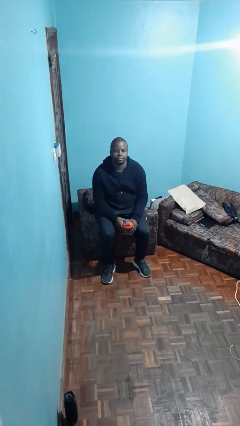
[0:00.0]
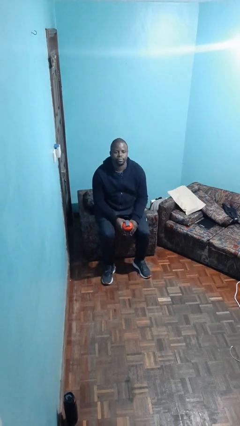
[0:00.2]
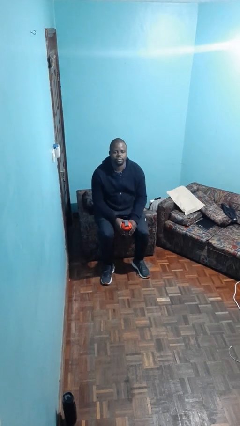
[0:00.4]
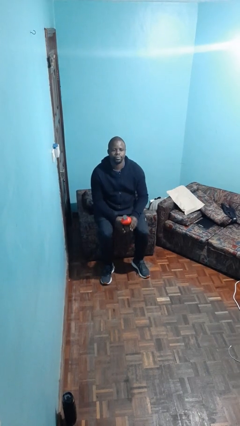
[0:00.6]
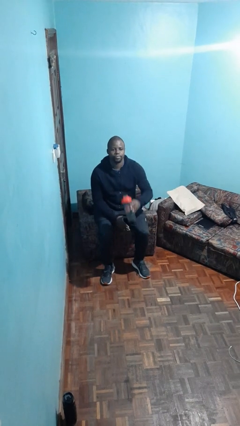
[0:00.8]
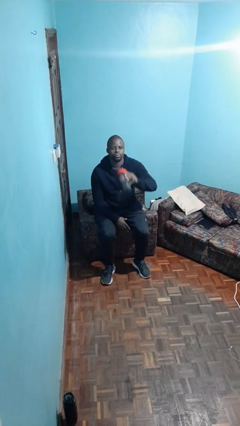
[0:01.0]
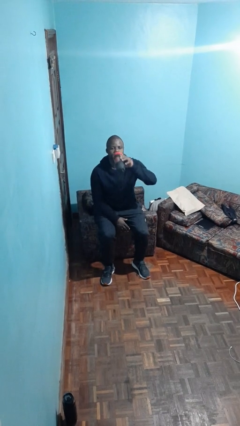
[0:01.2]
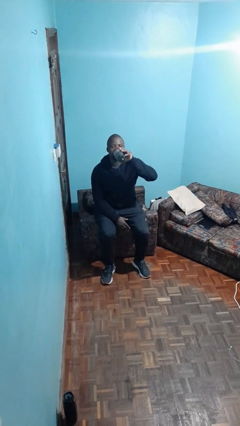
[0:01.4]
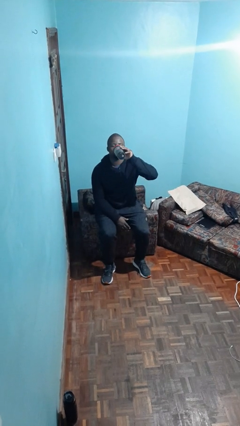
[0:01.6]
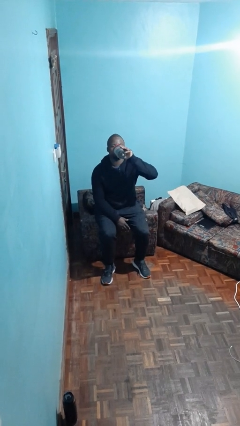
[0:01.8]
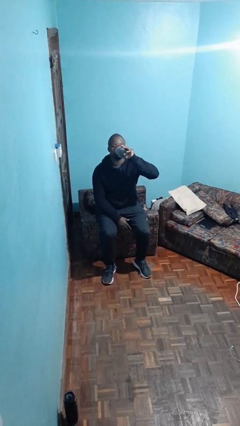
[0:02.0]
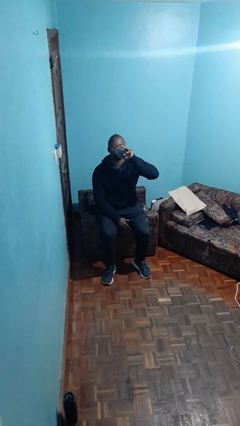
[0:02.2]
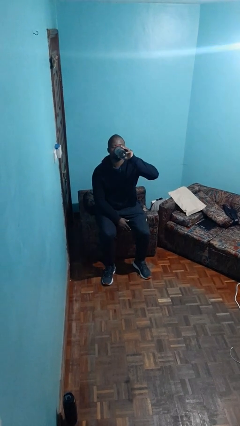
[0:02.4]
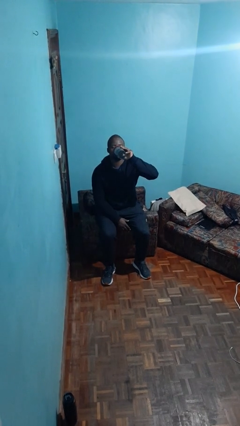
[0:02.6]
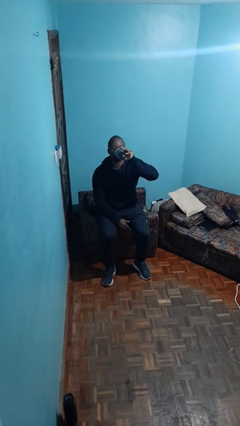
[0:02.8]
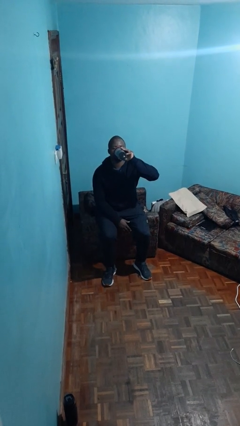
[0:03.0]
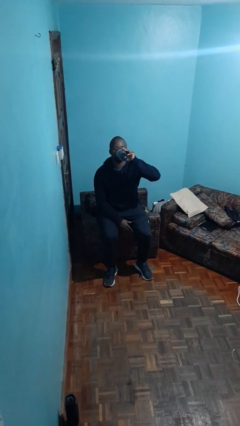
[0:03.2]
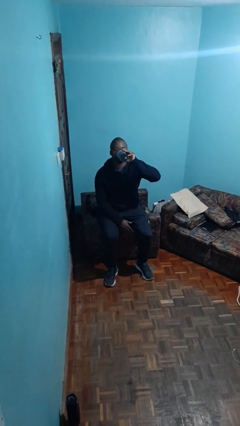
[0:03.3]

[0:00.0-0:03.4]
person drinks from bottle

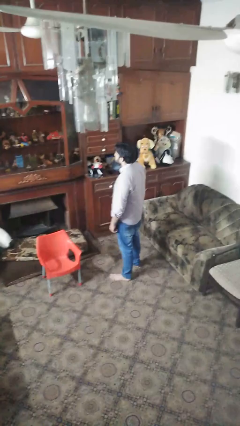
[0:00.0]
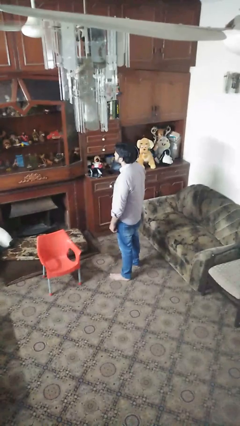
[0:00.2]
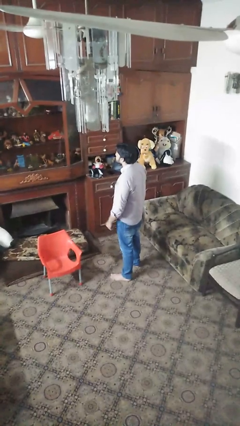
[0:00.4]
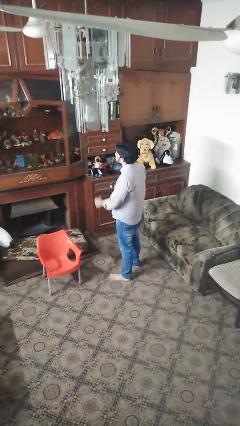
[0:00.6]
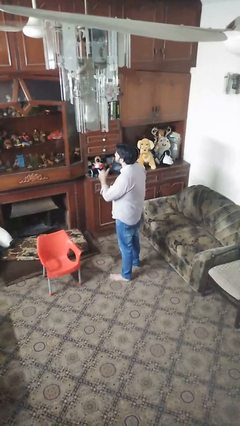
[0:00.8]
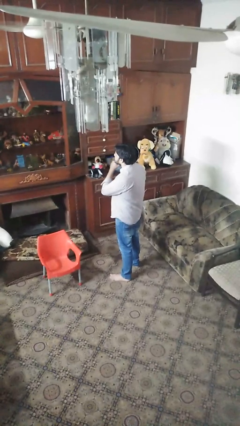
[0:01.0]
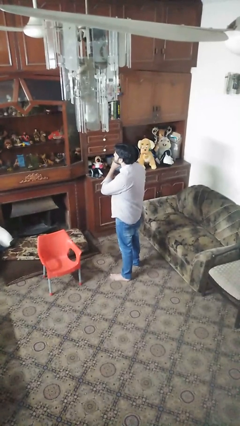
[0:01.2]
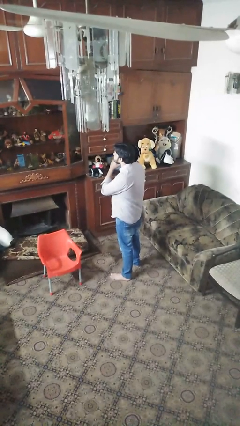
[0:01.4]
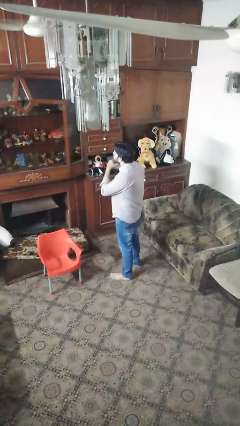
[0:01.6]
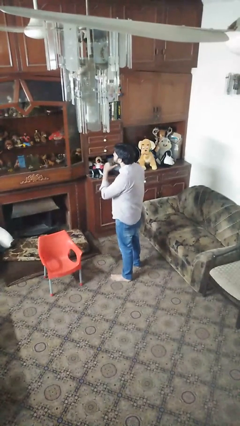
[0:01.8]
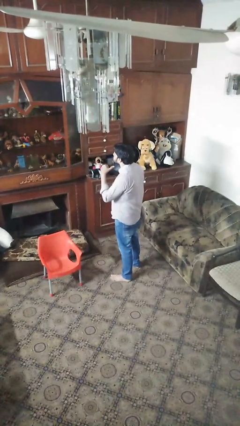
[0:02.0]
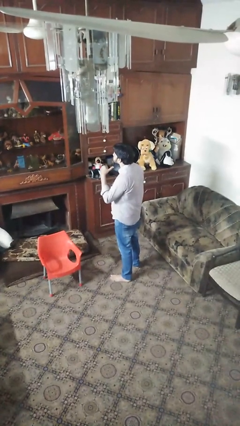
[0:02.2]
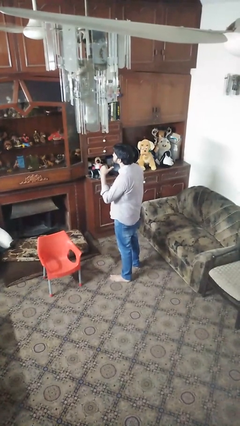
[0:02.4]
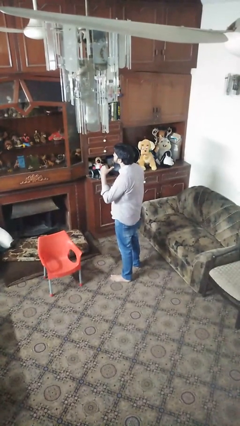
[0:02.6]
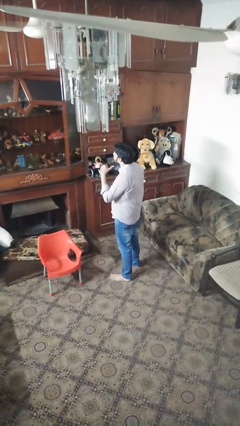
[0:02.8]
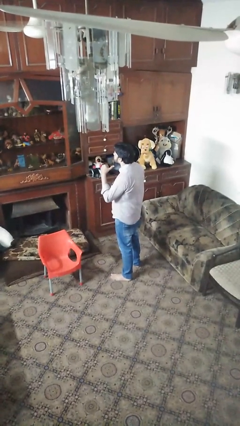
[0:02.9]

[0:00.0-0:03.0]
person gestures cut

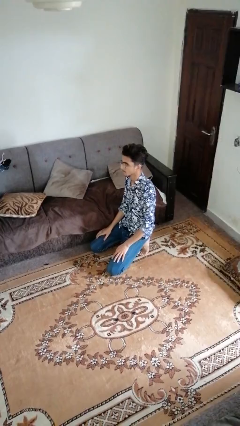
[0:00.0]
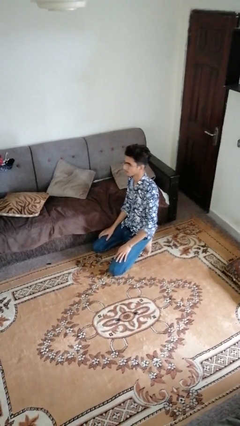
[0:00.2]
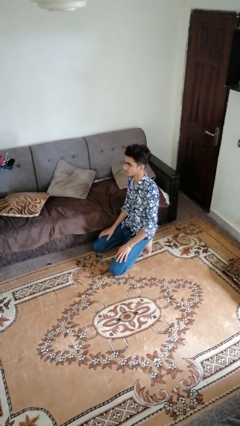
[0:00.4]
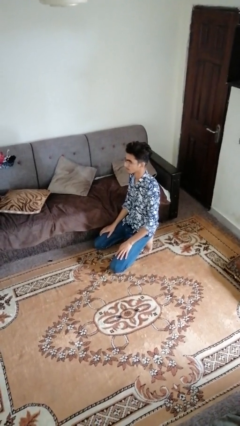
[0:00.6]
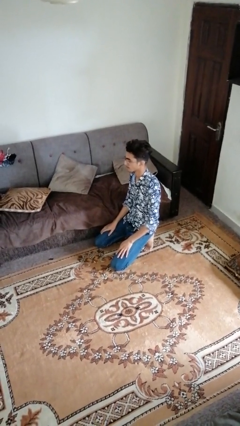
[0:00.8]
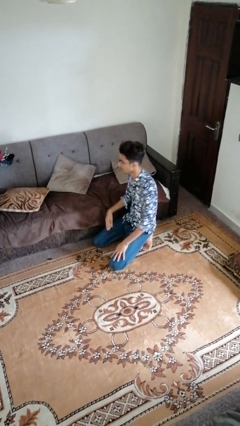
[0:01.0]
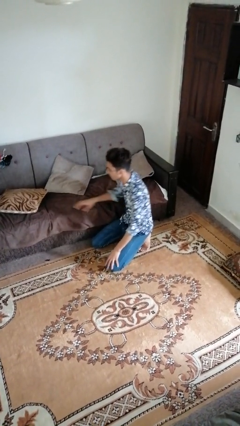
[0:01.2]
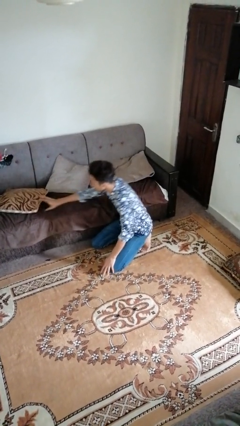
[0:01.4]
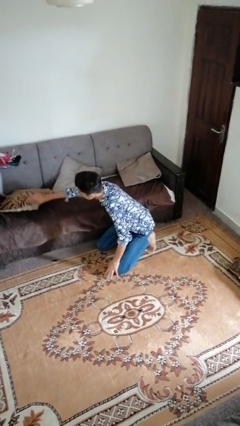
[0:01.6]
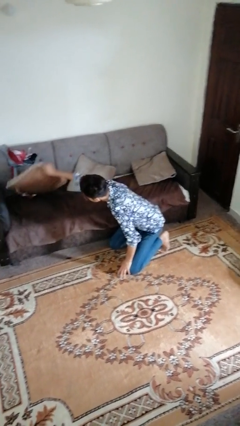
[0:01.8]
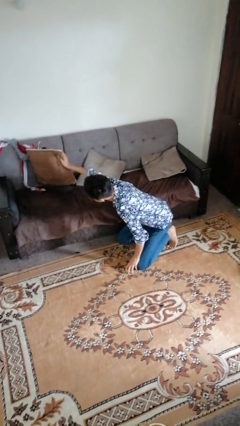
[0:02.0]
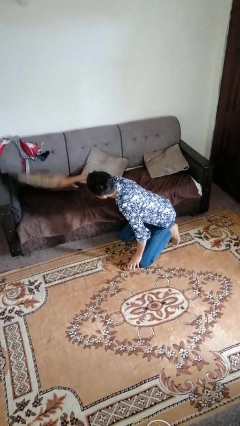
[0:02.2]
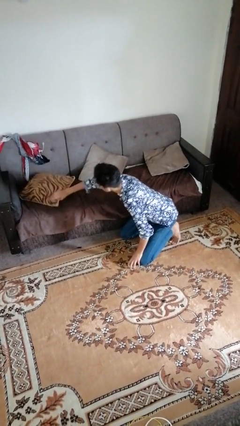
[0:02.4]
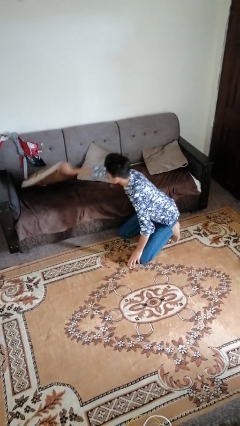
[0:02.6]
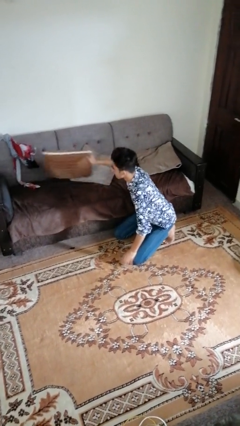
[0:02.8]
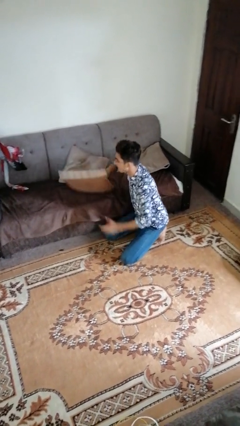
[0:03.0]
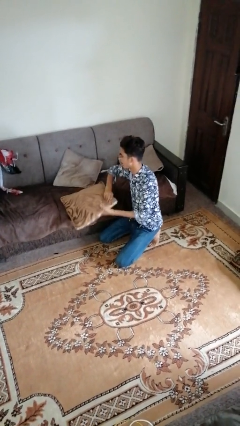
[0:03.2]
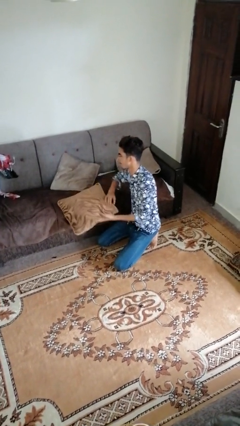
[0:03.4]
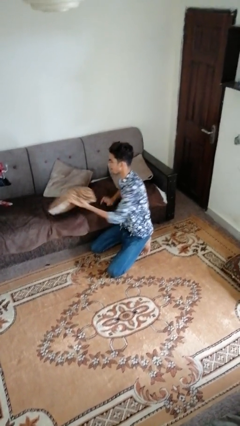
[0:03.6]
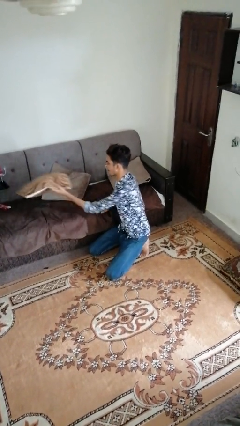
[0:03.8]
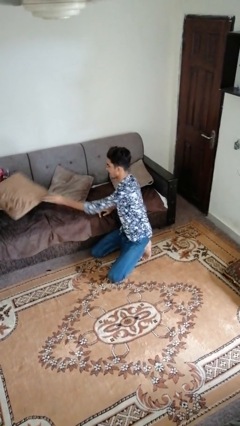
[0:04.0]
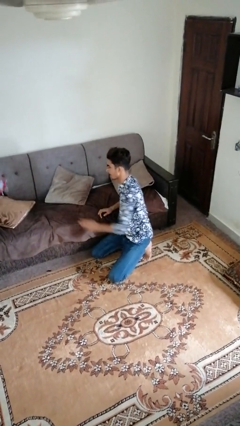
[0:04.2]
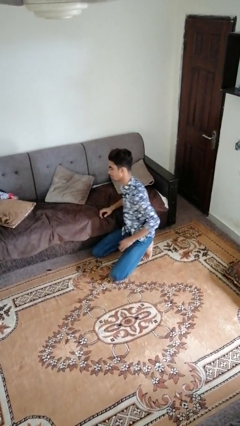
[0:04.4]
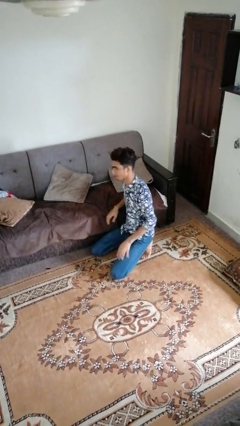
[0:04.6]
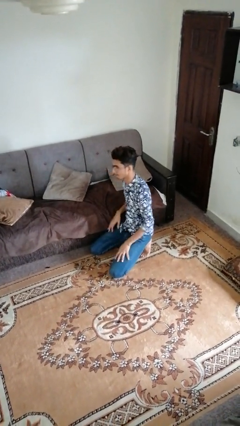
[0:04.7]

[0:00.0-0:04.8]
person searches under couch

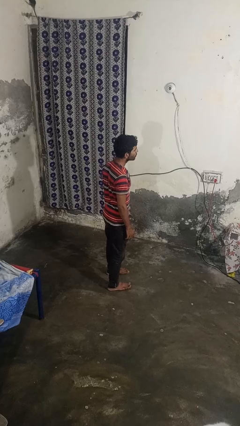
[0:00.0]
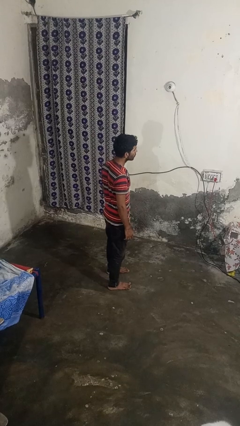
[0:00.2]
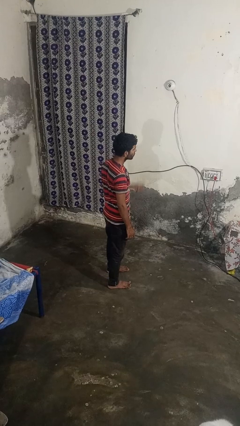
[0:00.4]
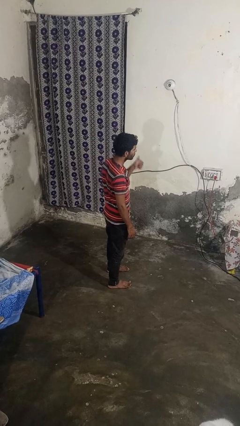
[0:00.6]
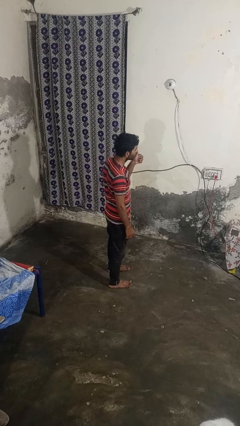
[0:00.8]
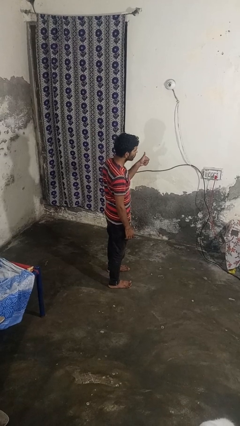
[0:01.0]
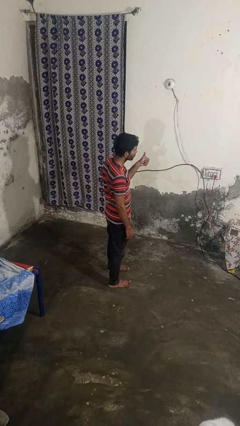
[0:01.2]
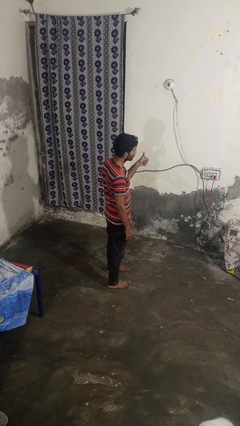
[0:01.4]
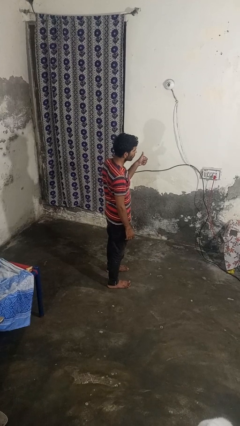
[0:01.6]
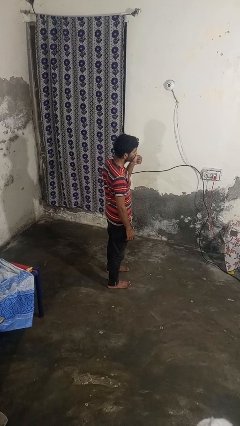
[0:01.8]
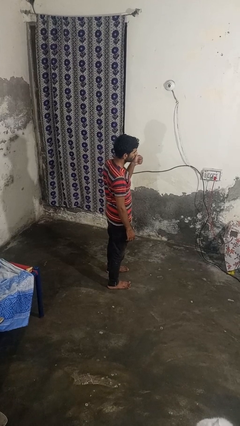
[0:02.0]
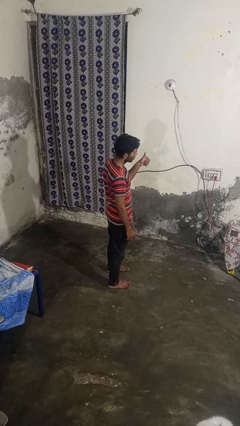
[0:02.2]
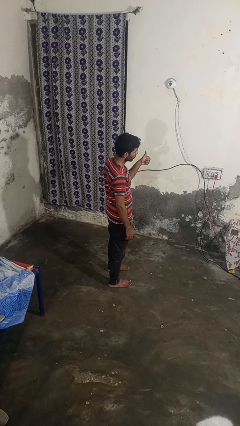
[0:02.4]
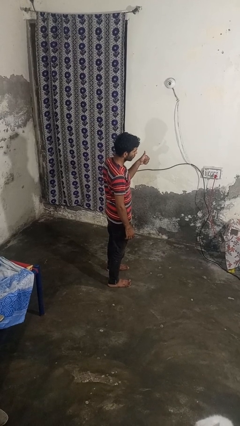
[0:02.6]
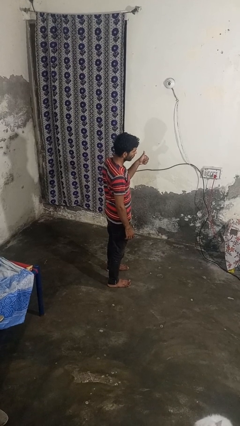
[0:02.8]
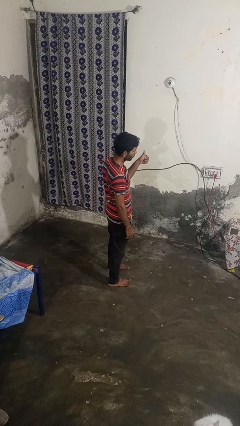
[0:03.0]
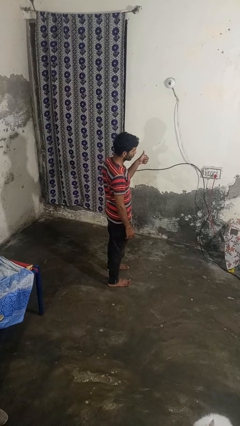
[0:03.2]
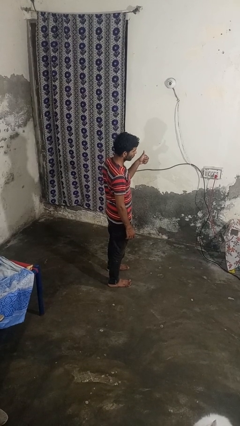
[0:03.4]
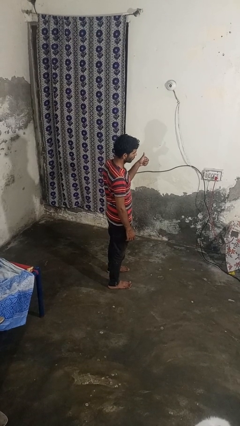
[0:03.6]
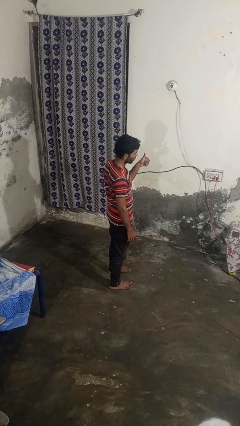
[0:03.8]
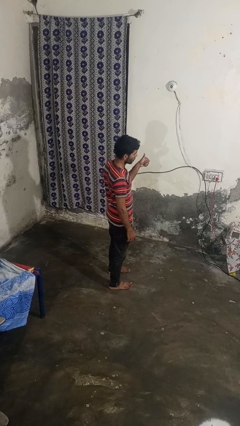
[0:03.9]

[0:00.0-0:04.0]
person gestures thumbs up

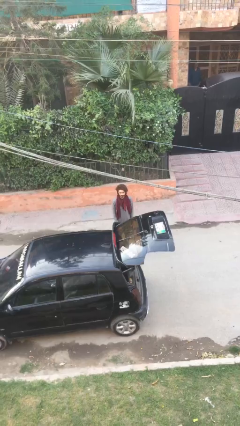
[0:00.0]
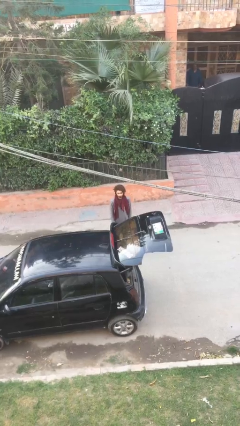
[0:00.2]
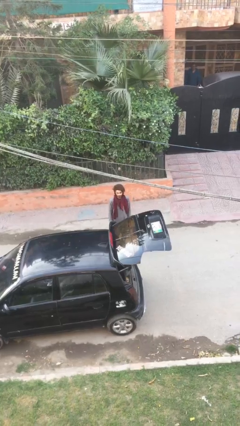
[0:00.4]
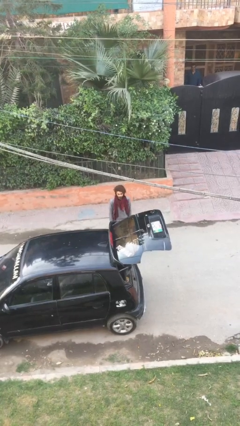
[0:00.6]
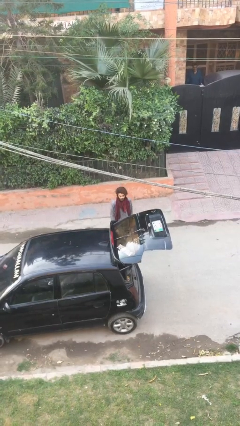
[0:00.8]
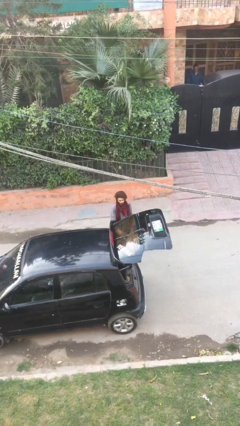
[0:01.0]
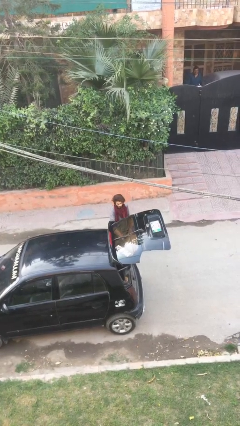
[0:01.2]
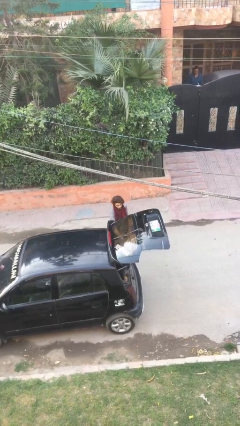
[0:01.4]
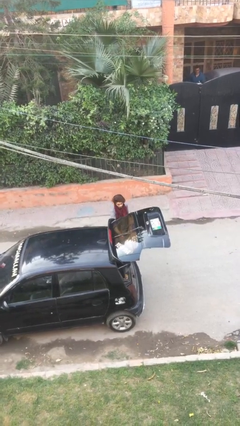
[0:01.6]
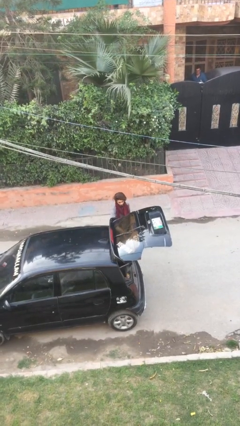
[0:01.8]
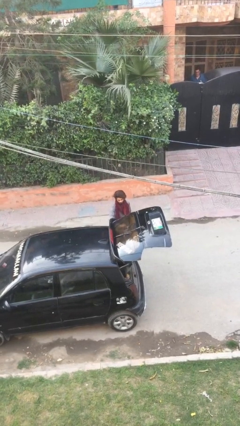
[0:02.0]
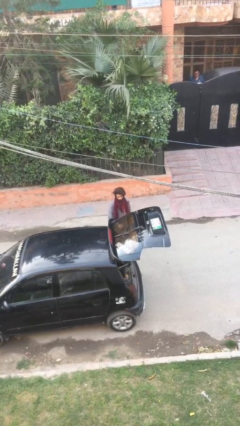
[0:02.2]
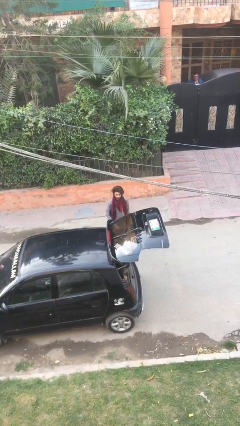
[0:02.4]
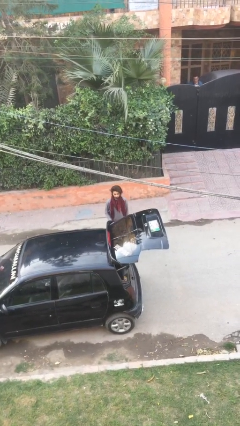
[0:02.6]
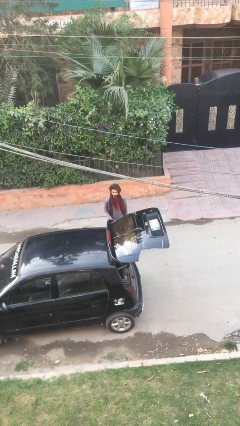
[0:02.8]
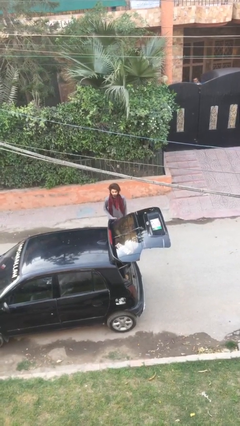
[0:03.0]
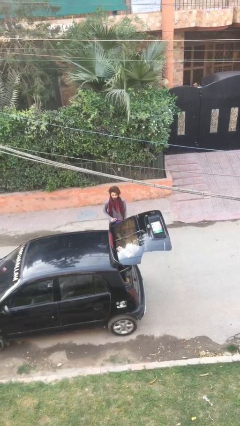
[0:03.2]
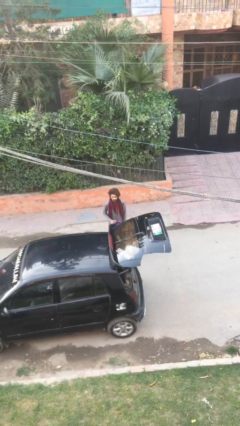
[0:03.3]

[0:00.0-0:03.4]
person unloads car
